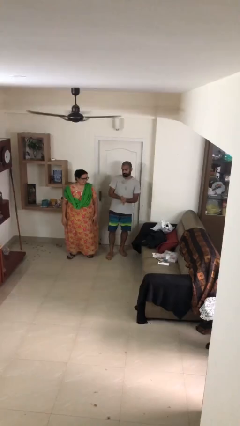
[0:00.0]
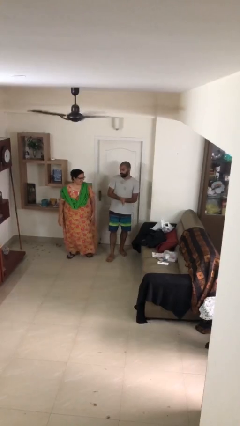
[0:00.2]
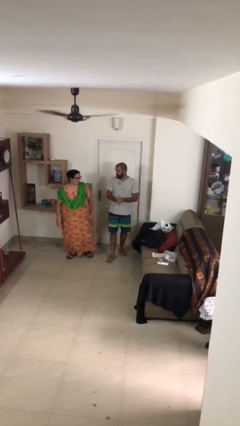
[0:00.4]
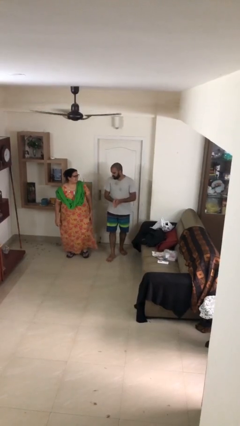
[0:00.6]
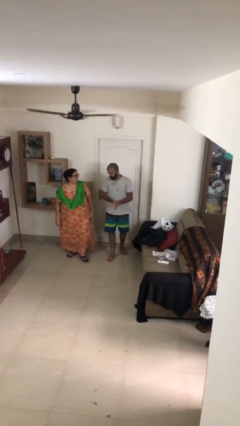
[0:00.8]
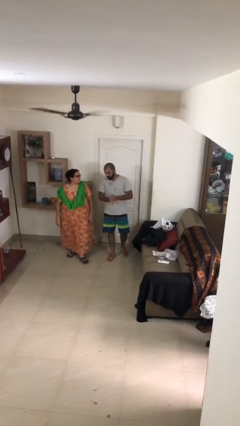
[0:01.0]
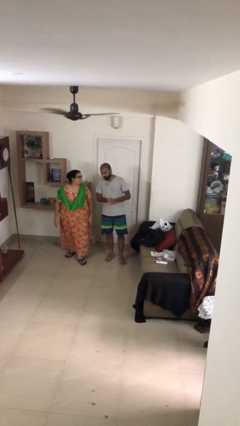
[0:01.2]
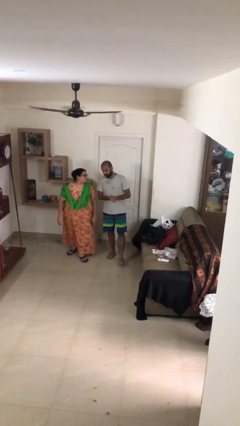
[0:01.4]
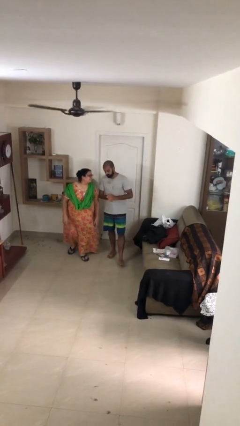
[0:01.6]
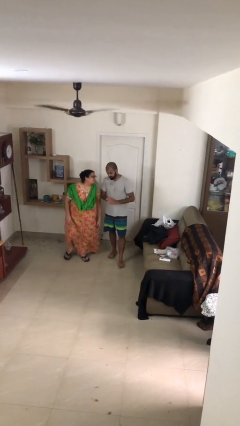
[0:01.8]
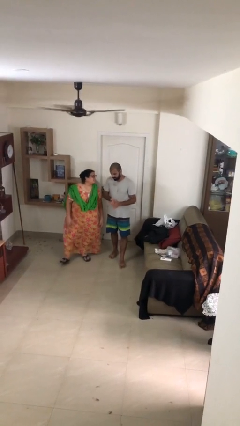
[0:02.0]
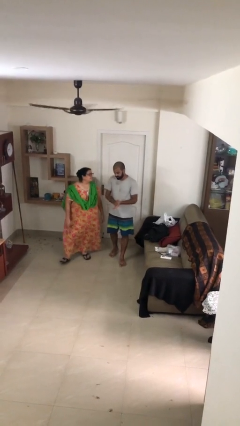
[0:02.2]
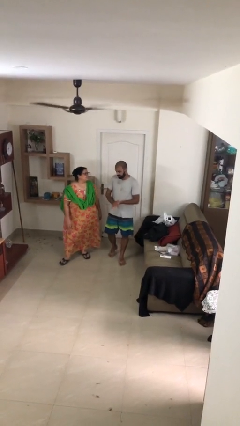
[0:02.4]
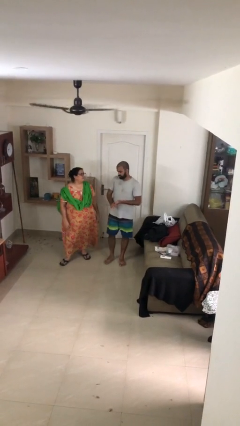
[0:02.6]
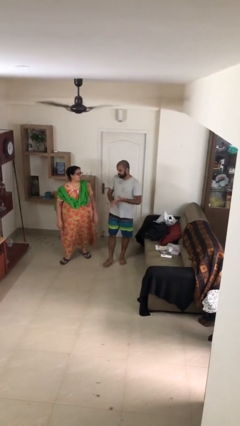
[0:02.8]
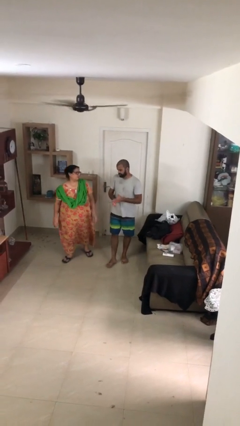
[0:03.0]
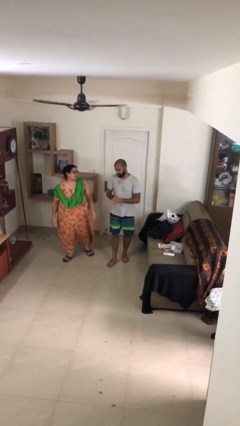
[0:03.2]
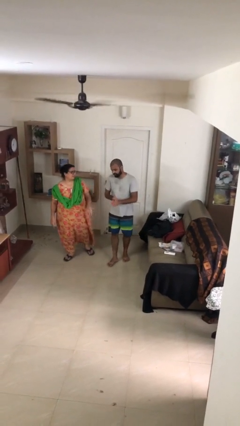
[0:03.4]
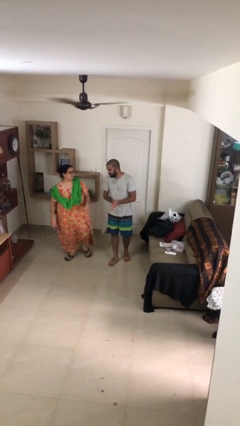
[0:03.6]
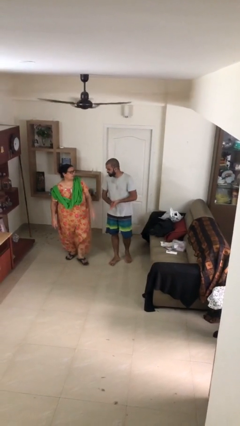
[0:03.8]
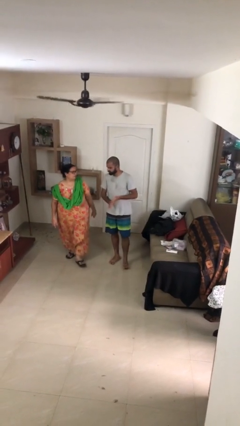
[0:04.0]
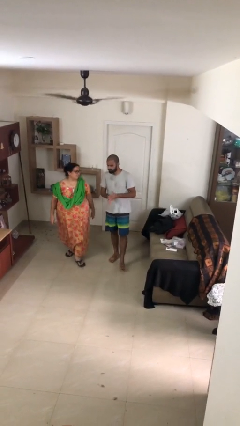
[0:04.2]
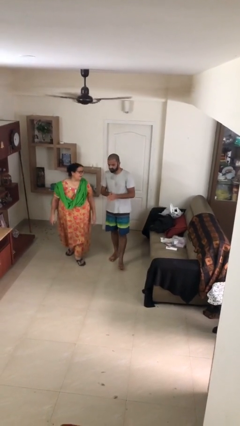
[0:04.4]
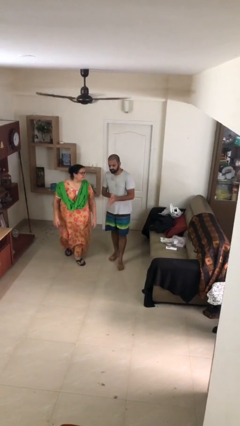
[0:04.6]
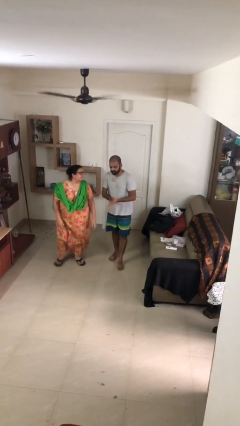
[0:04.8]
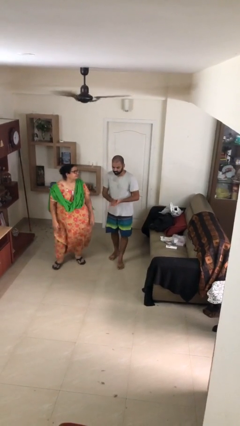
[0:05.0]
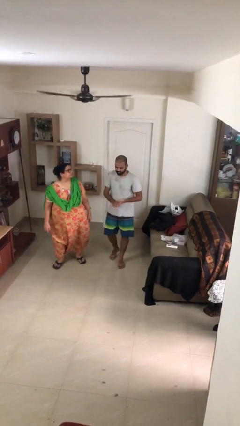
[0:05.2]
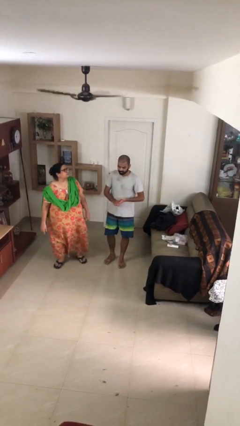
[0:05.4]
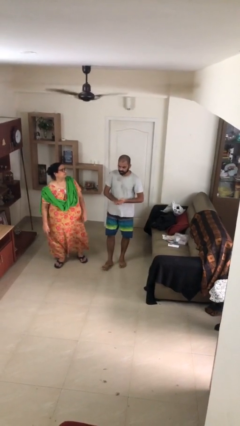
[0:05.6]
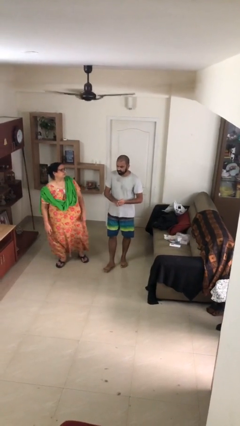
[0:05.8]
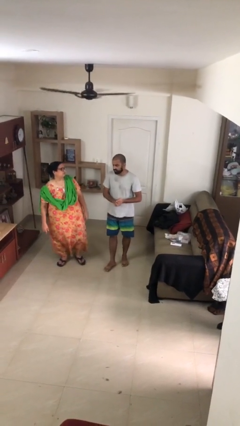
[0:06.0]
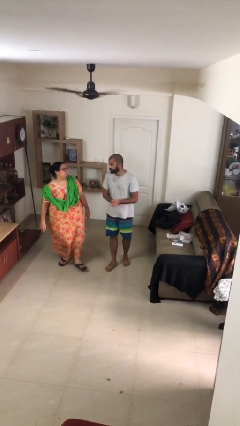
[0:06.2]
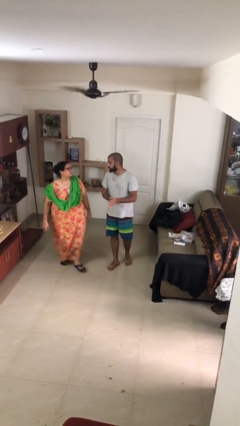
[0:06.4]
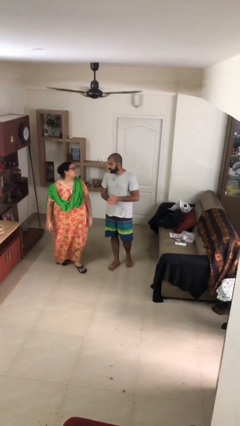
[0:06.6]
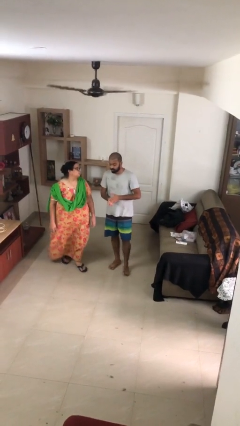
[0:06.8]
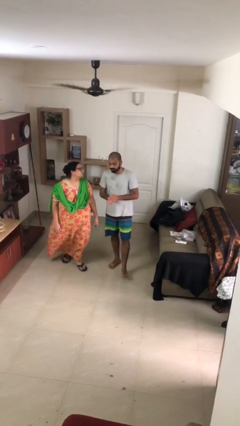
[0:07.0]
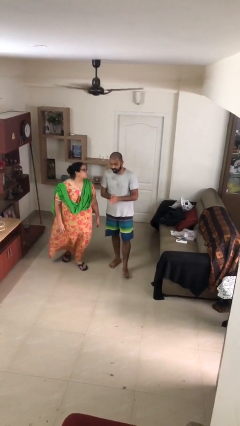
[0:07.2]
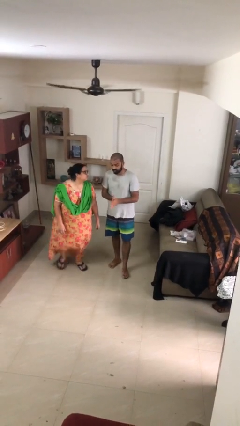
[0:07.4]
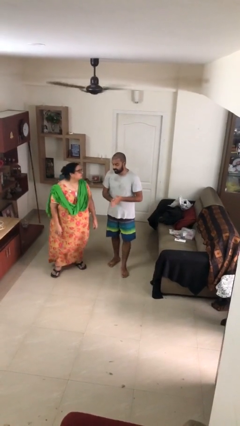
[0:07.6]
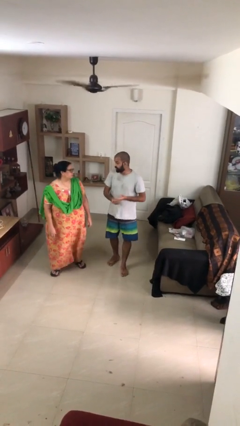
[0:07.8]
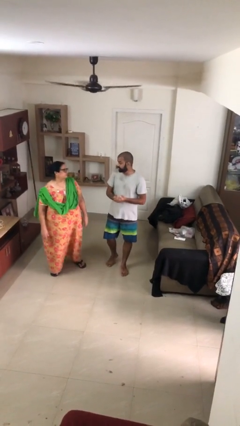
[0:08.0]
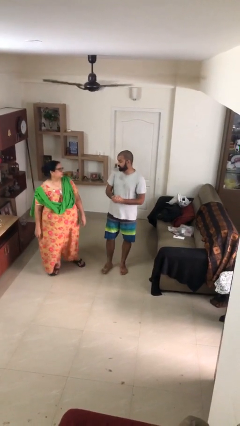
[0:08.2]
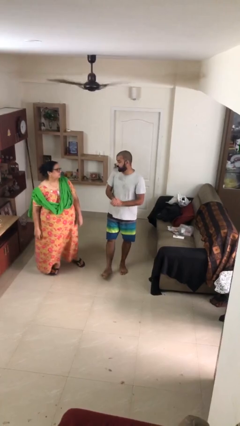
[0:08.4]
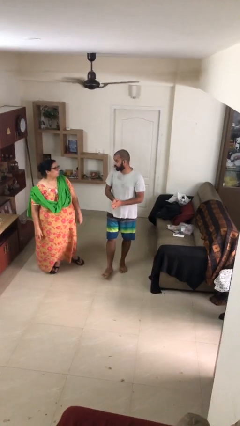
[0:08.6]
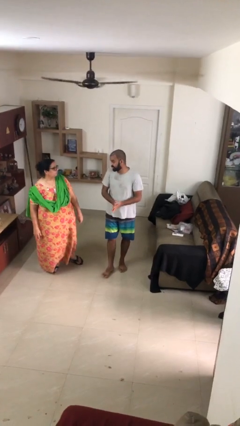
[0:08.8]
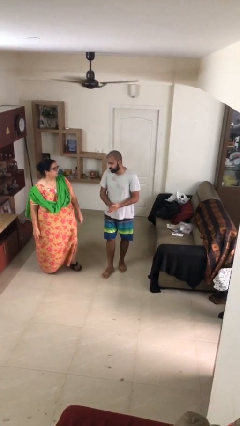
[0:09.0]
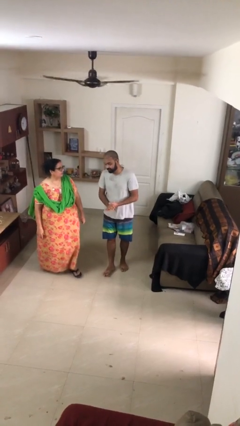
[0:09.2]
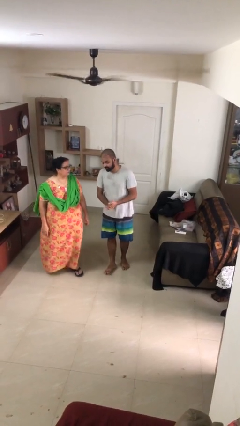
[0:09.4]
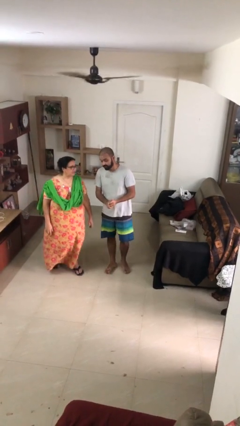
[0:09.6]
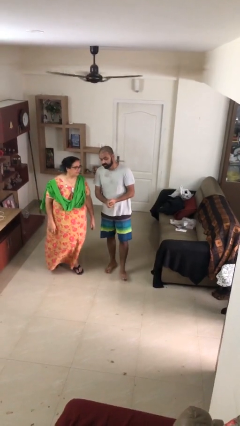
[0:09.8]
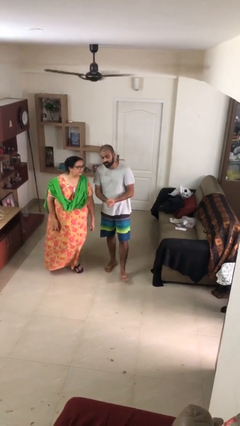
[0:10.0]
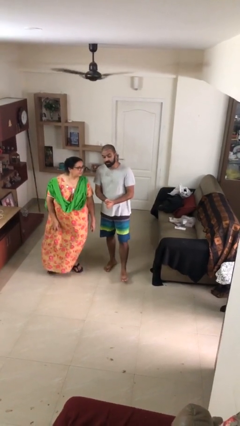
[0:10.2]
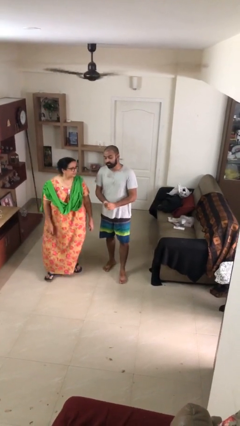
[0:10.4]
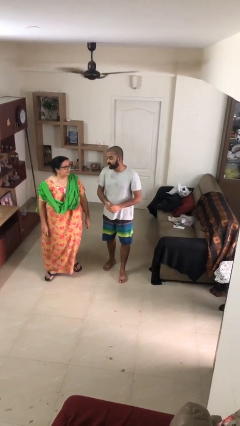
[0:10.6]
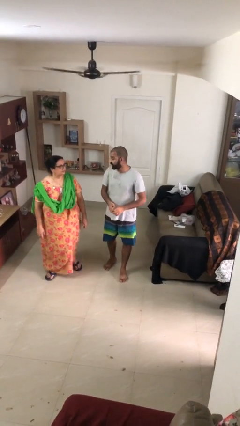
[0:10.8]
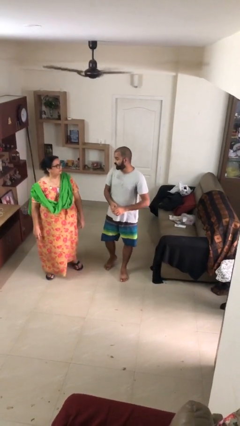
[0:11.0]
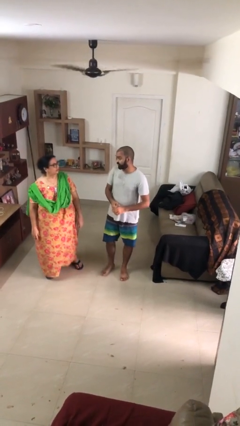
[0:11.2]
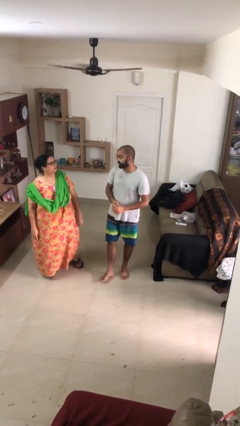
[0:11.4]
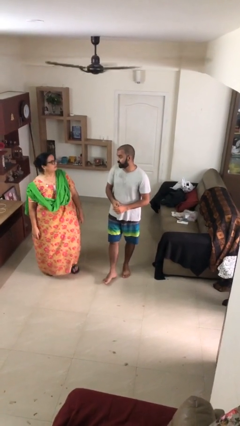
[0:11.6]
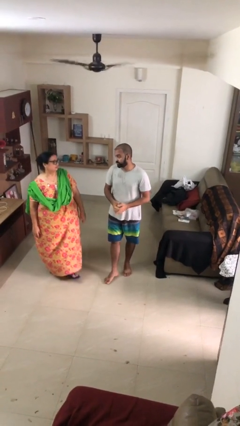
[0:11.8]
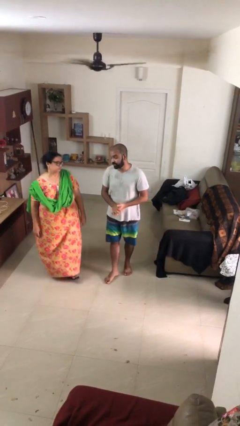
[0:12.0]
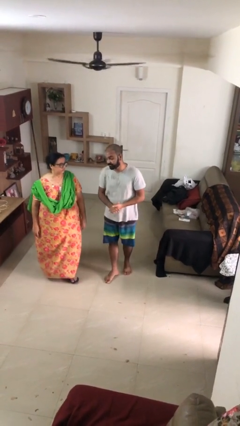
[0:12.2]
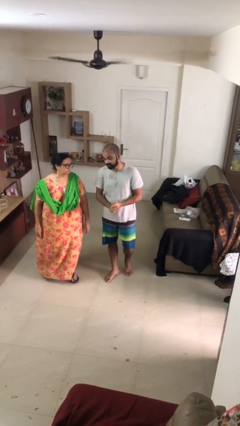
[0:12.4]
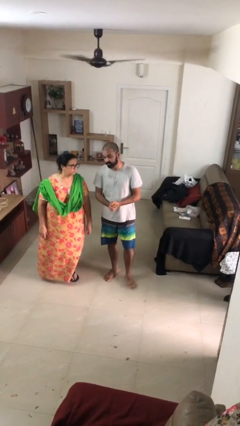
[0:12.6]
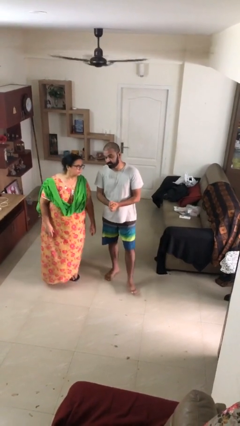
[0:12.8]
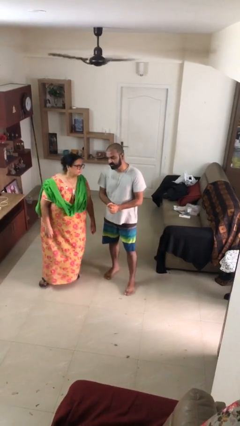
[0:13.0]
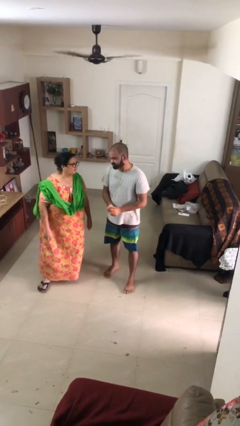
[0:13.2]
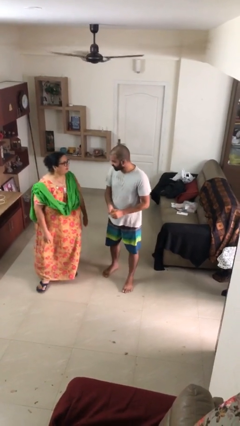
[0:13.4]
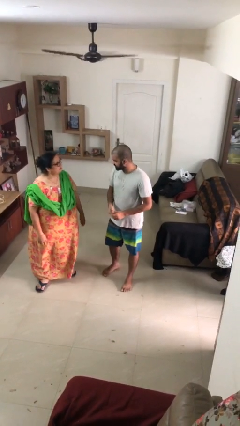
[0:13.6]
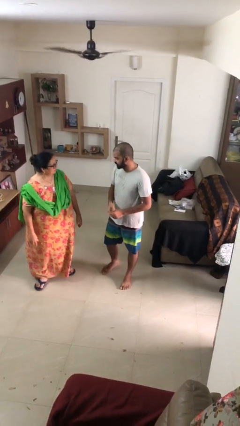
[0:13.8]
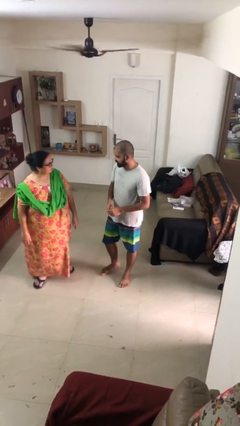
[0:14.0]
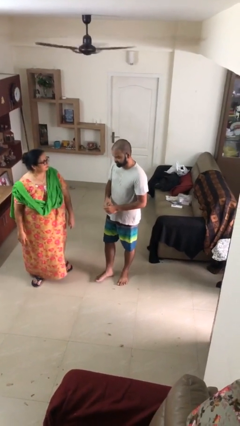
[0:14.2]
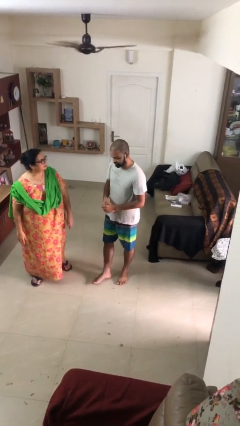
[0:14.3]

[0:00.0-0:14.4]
person talks to person

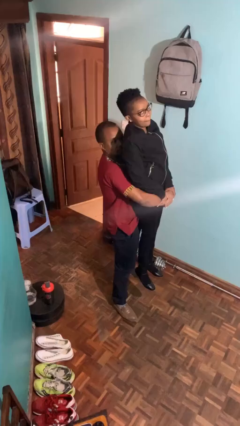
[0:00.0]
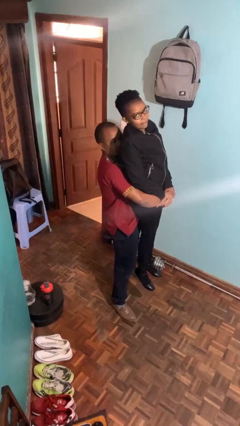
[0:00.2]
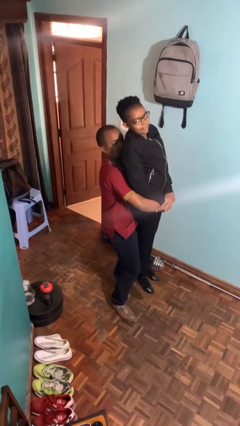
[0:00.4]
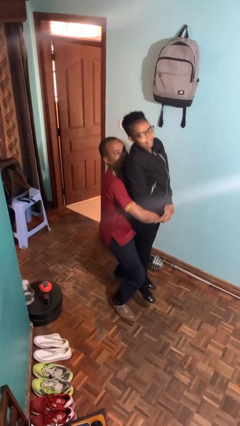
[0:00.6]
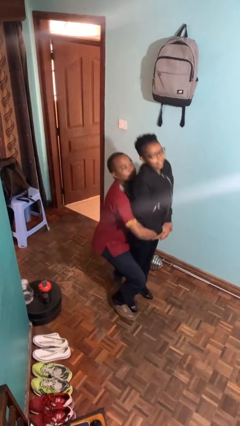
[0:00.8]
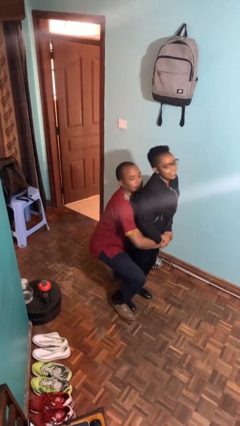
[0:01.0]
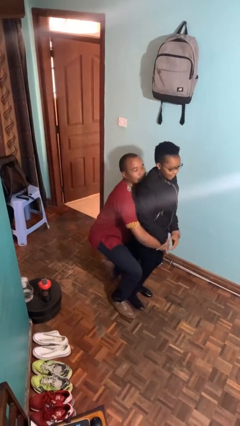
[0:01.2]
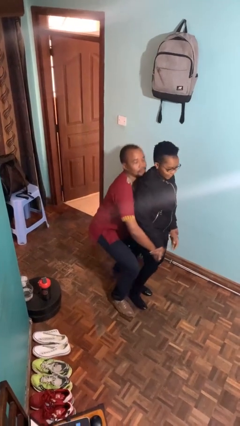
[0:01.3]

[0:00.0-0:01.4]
person puts down person

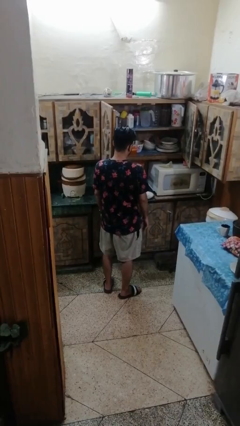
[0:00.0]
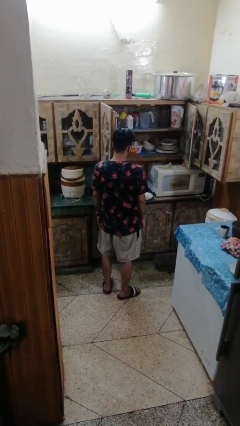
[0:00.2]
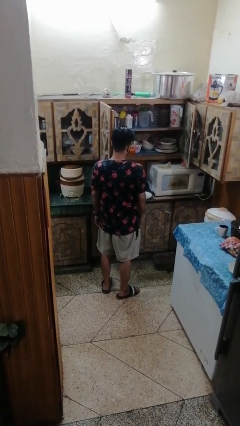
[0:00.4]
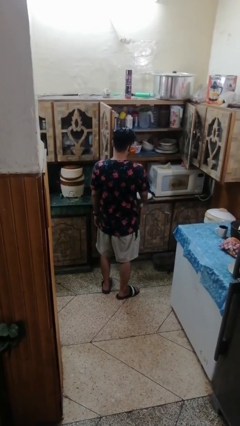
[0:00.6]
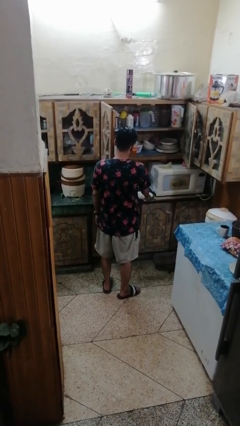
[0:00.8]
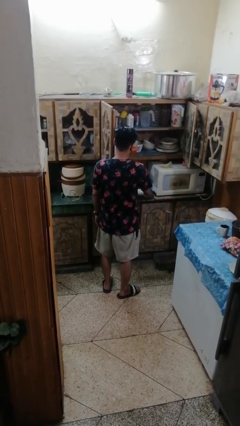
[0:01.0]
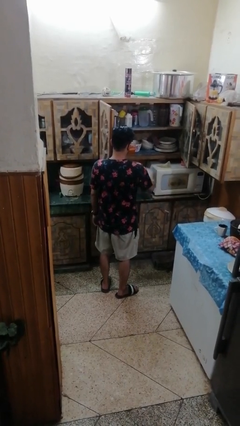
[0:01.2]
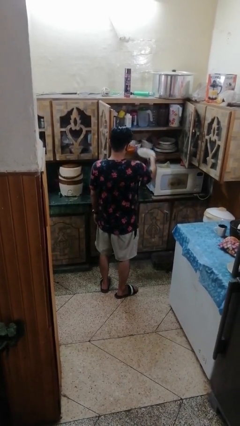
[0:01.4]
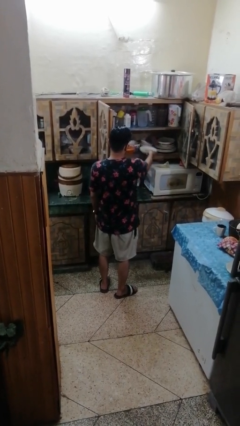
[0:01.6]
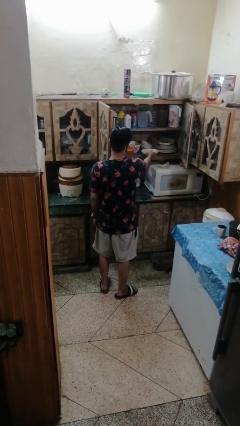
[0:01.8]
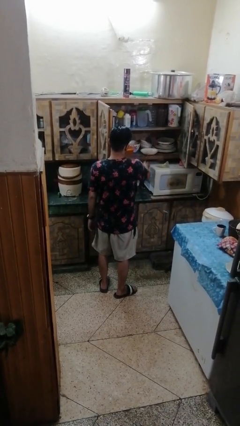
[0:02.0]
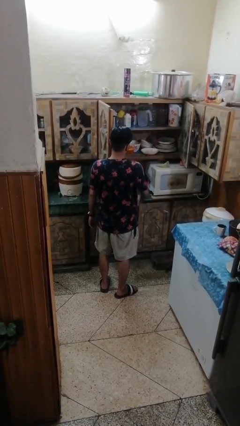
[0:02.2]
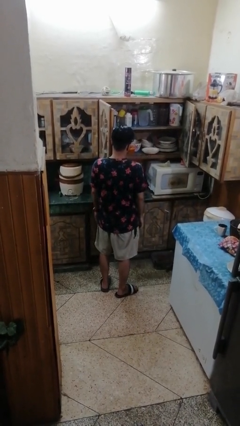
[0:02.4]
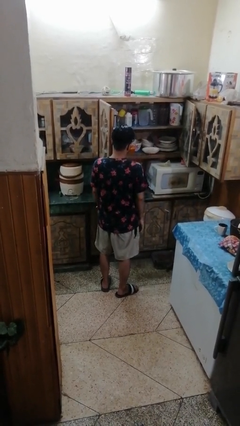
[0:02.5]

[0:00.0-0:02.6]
person puts object in cabinet
